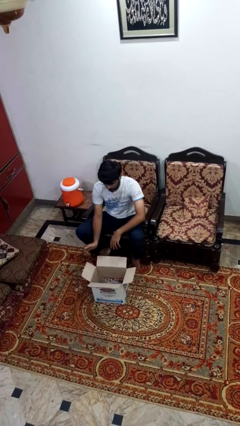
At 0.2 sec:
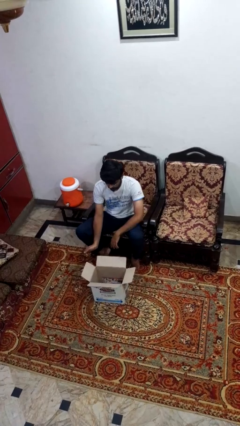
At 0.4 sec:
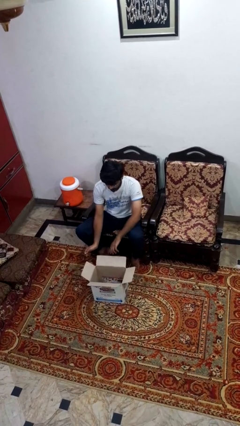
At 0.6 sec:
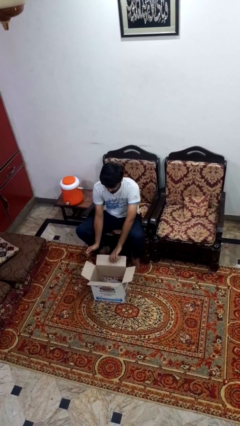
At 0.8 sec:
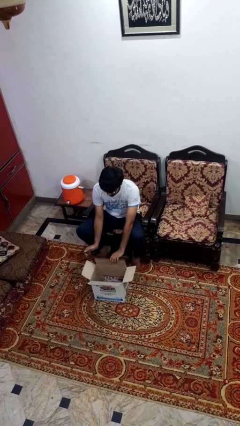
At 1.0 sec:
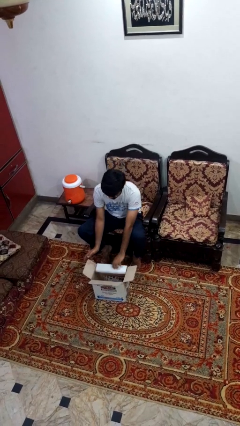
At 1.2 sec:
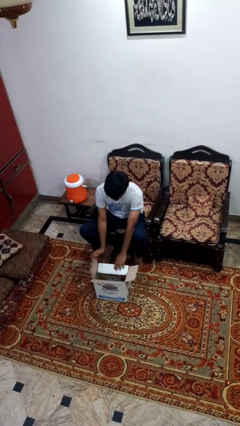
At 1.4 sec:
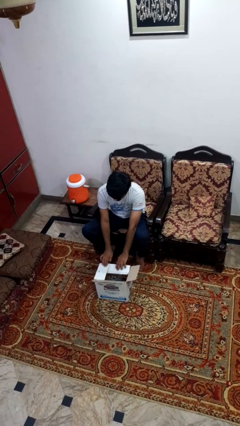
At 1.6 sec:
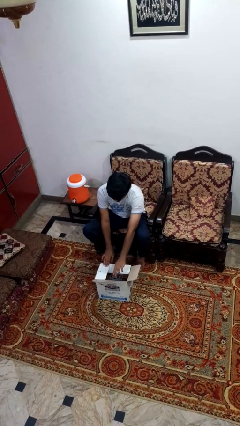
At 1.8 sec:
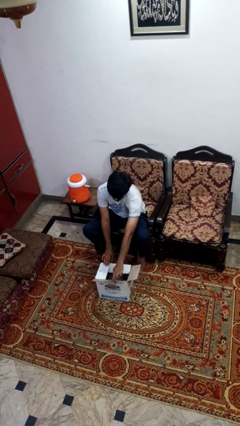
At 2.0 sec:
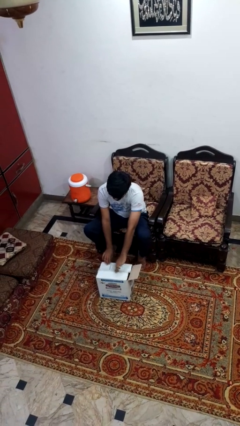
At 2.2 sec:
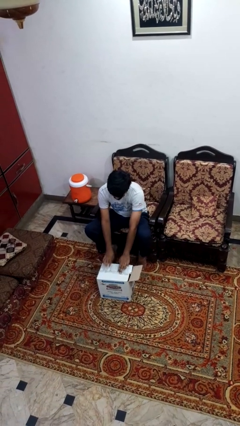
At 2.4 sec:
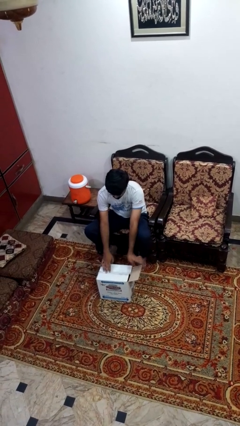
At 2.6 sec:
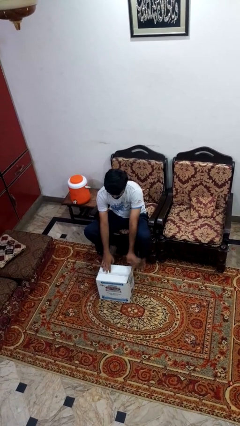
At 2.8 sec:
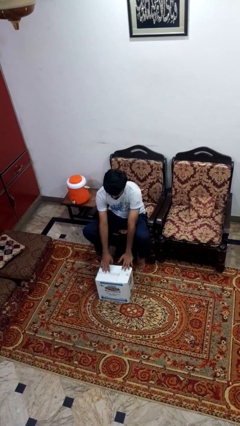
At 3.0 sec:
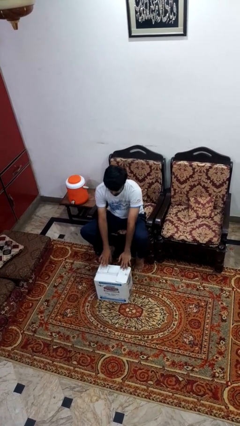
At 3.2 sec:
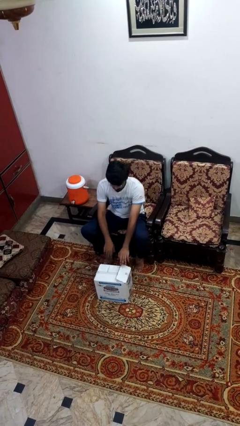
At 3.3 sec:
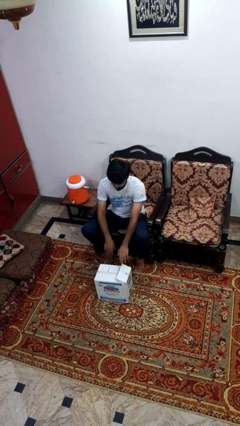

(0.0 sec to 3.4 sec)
person closes box

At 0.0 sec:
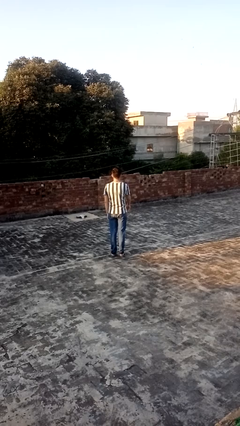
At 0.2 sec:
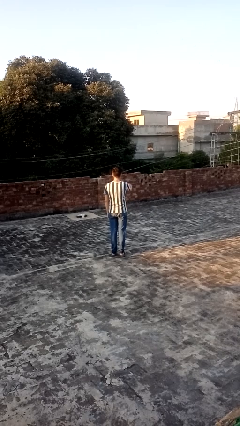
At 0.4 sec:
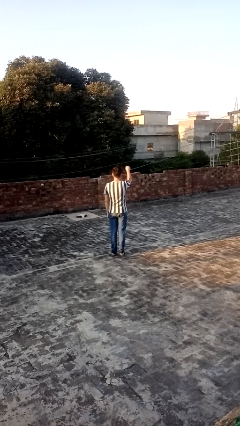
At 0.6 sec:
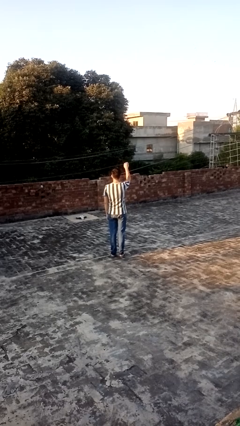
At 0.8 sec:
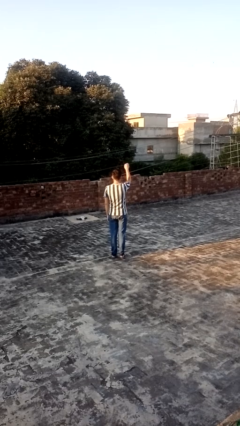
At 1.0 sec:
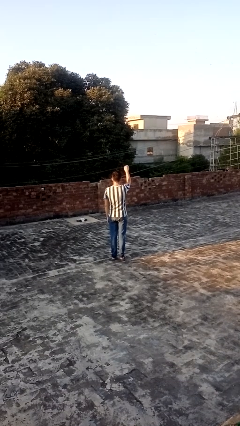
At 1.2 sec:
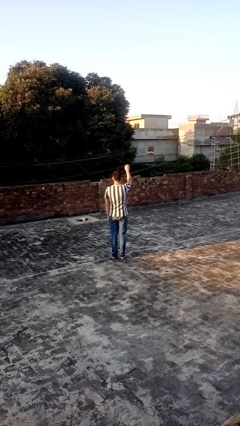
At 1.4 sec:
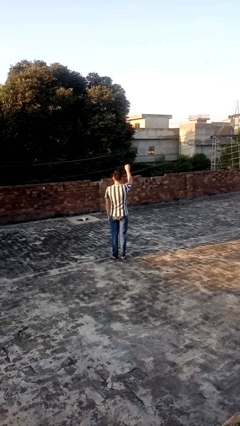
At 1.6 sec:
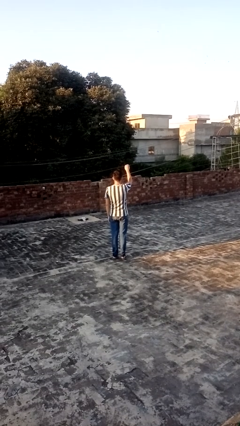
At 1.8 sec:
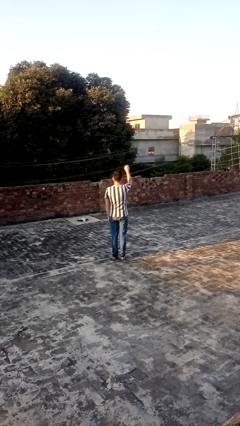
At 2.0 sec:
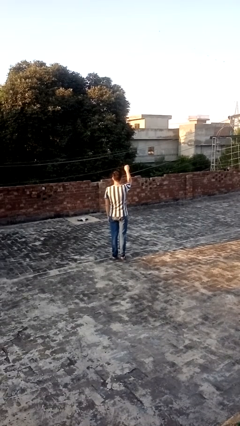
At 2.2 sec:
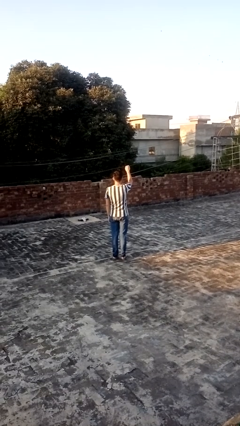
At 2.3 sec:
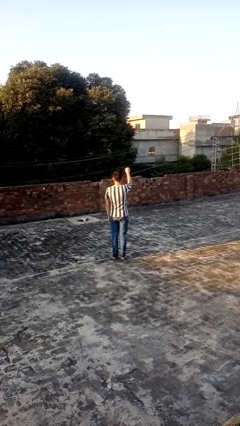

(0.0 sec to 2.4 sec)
person gestures swipe up

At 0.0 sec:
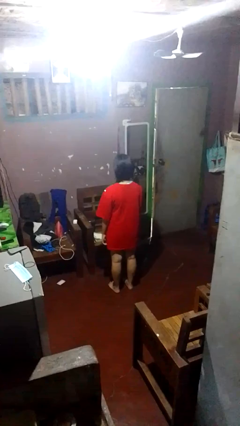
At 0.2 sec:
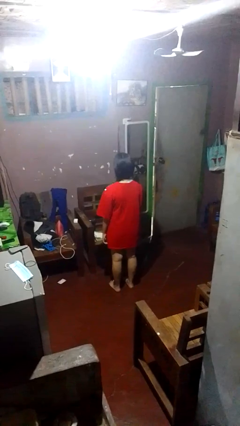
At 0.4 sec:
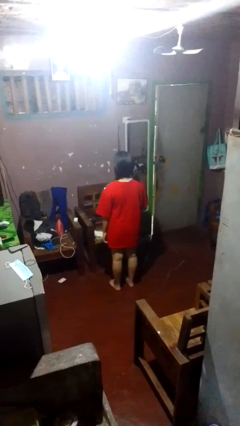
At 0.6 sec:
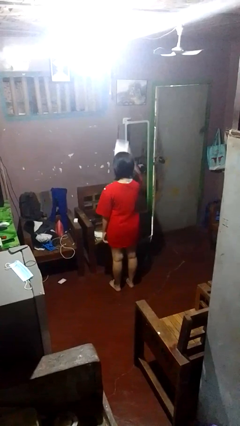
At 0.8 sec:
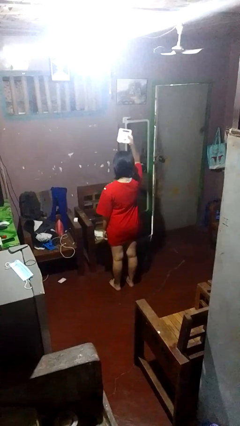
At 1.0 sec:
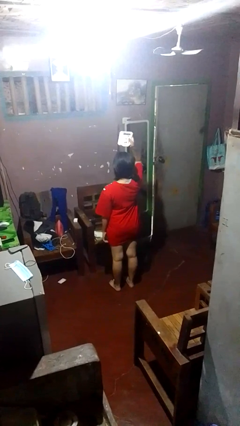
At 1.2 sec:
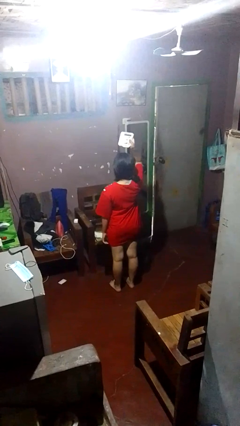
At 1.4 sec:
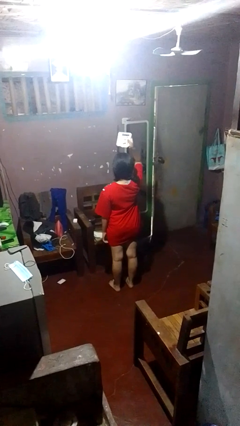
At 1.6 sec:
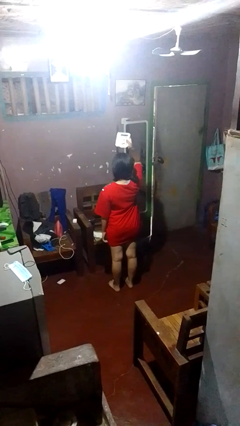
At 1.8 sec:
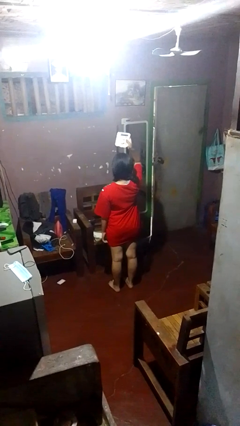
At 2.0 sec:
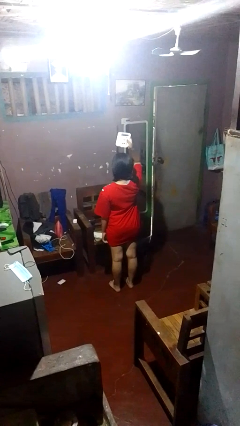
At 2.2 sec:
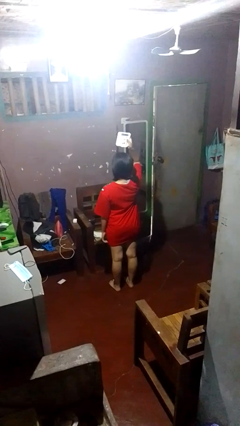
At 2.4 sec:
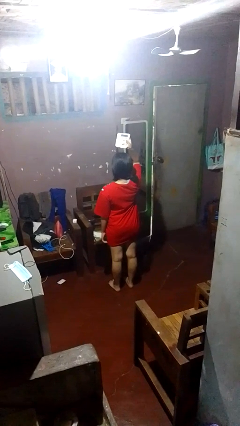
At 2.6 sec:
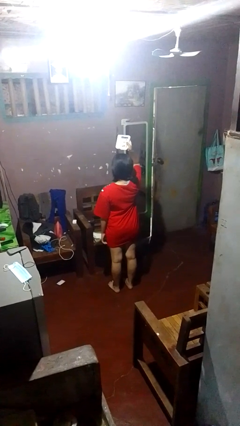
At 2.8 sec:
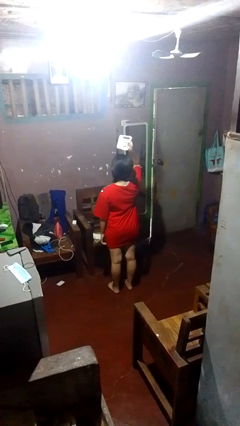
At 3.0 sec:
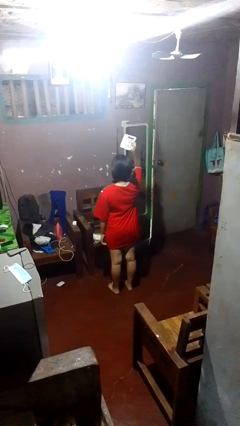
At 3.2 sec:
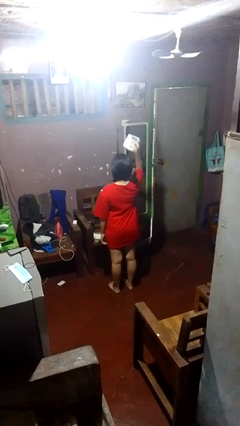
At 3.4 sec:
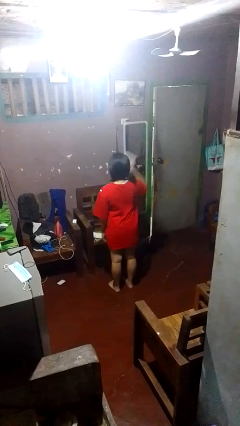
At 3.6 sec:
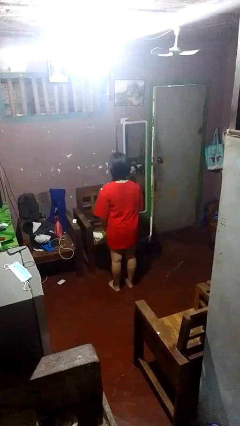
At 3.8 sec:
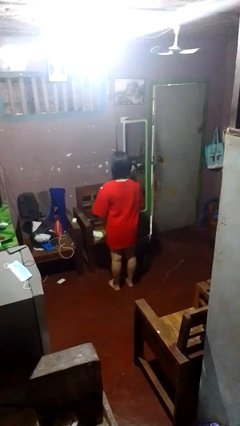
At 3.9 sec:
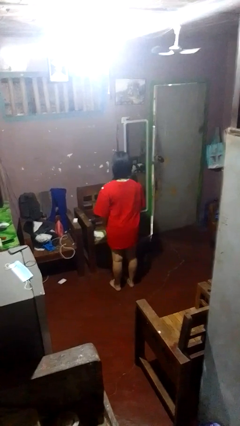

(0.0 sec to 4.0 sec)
person holds object above head

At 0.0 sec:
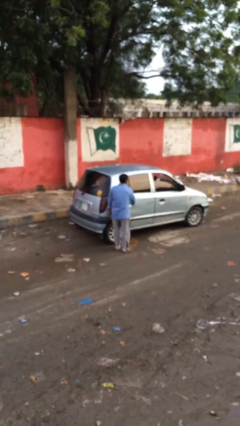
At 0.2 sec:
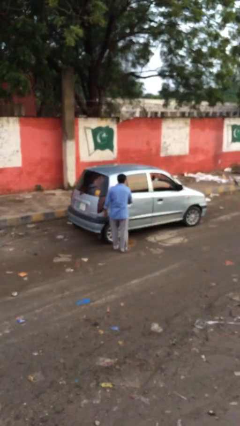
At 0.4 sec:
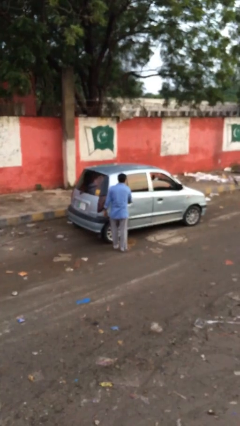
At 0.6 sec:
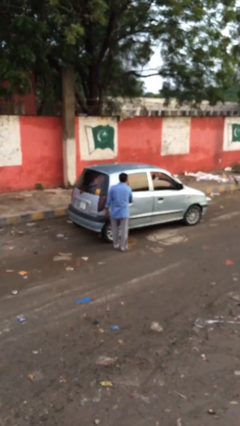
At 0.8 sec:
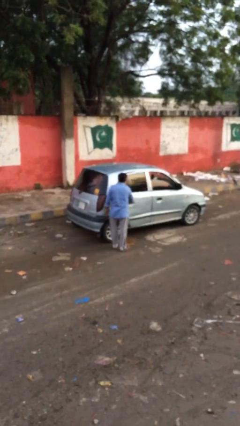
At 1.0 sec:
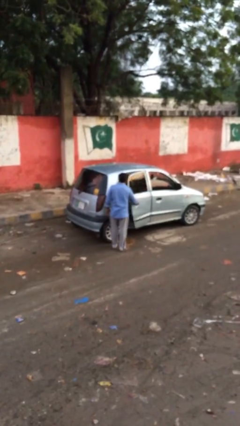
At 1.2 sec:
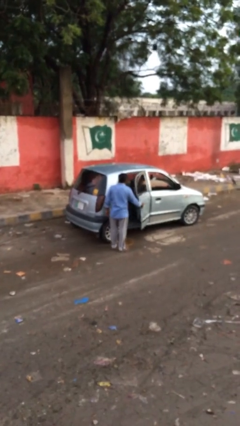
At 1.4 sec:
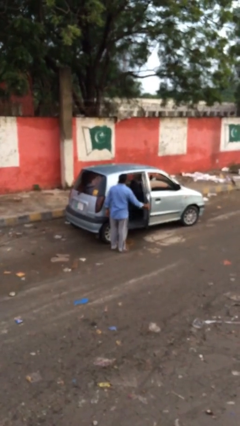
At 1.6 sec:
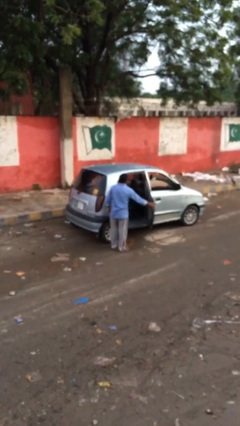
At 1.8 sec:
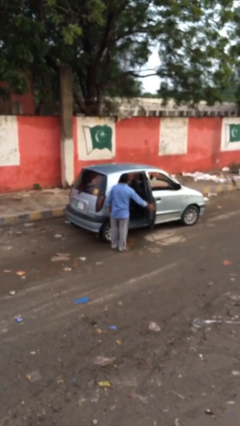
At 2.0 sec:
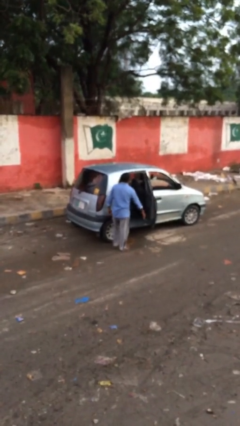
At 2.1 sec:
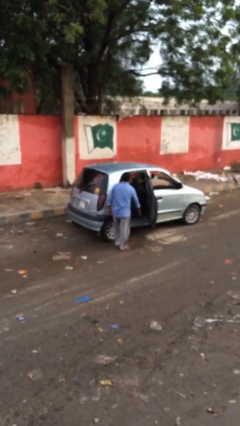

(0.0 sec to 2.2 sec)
person opens car door

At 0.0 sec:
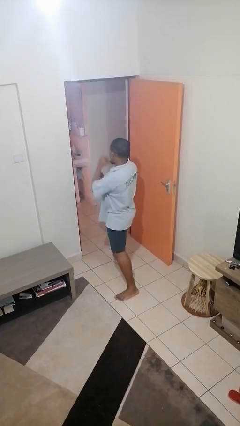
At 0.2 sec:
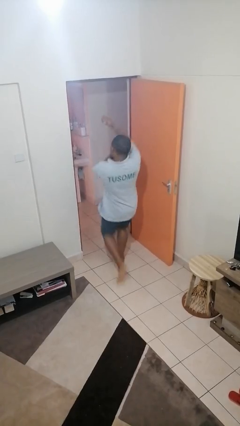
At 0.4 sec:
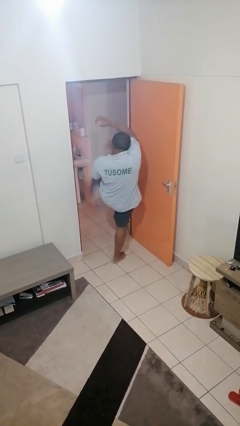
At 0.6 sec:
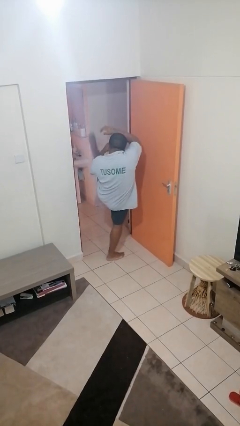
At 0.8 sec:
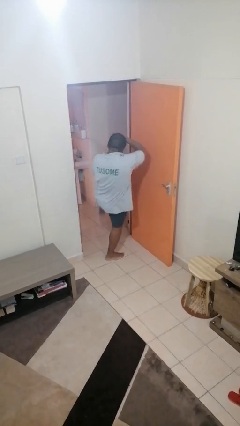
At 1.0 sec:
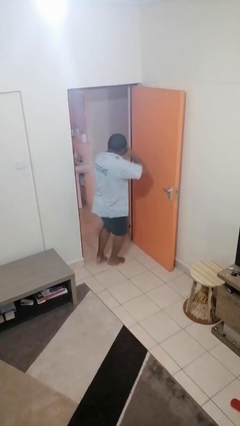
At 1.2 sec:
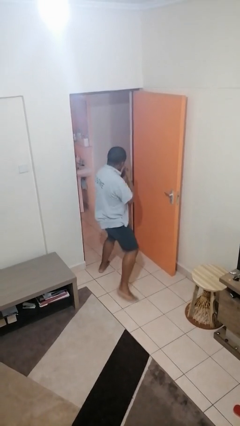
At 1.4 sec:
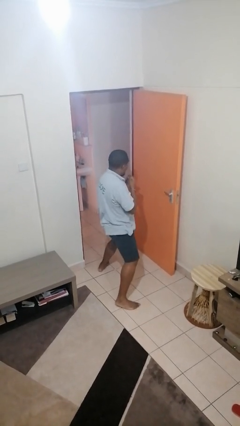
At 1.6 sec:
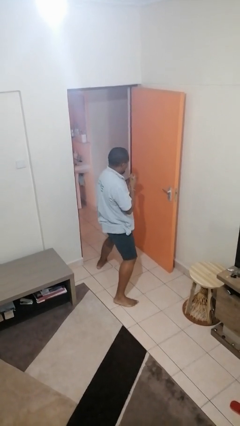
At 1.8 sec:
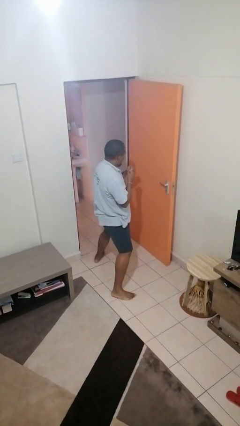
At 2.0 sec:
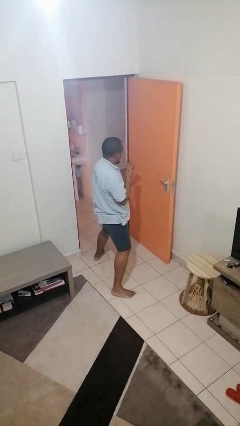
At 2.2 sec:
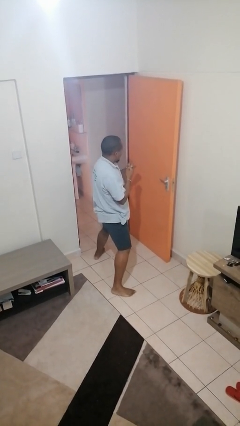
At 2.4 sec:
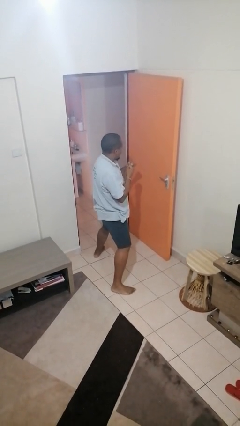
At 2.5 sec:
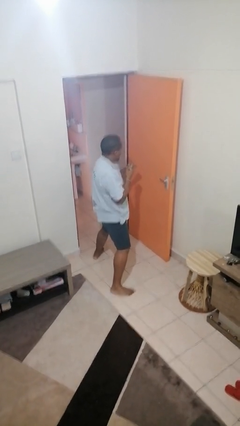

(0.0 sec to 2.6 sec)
person karate kicks

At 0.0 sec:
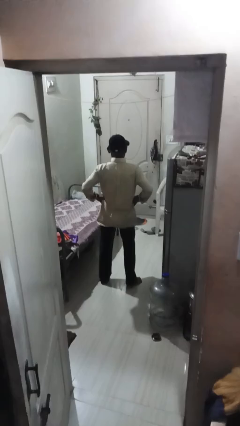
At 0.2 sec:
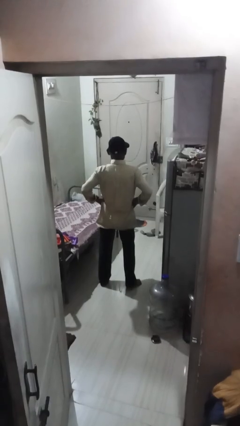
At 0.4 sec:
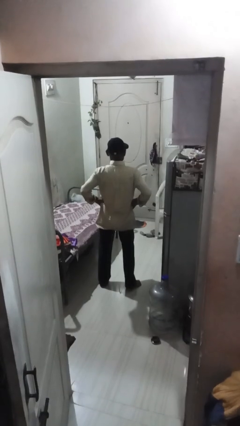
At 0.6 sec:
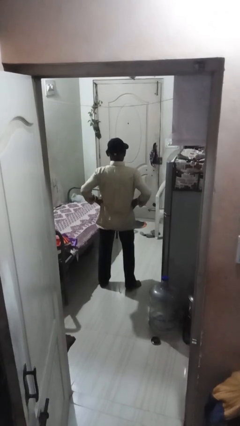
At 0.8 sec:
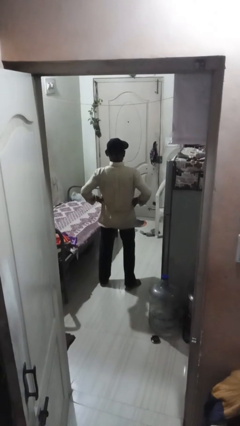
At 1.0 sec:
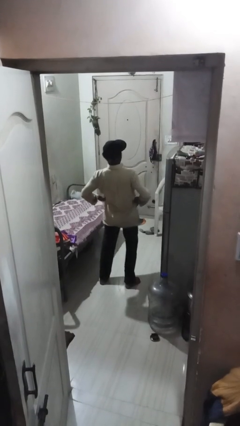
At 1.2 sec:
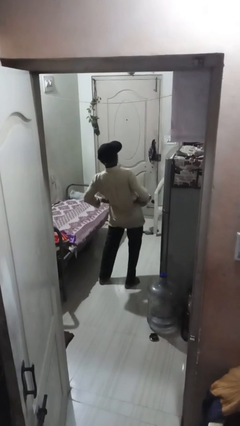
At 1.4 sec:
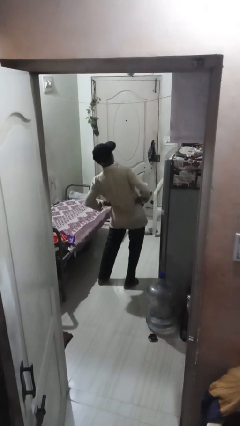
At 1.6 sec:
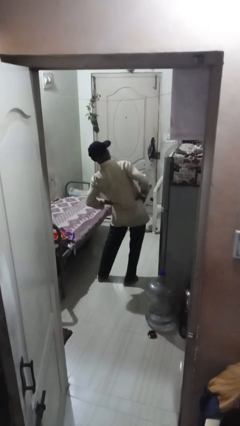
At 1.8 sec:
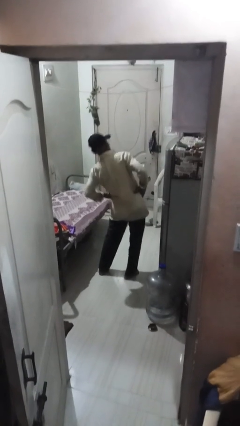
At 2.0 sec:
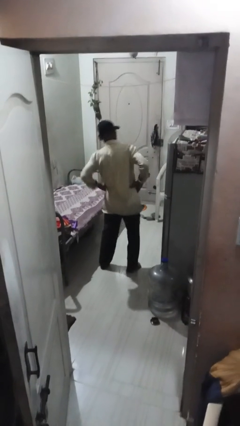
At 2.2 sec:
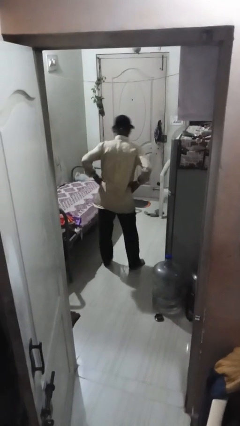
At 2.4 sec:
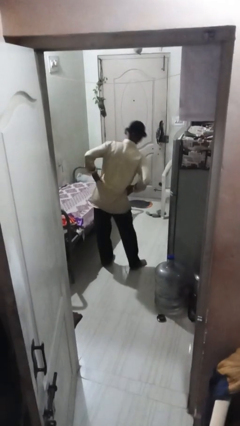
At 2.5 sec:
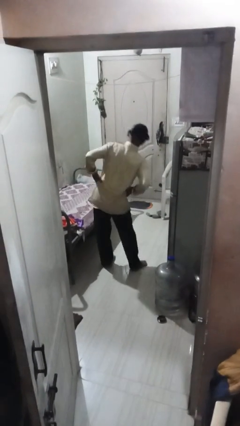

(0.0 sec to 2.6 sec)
person wiggles hips

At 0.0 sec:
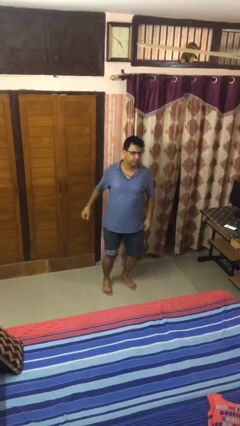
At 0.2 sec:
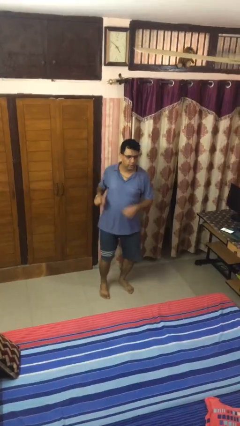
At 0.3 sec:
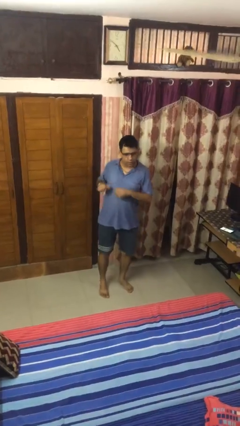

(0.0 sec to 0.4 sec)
person dances in place
